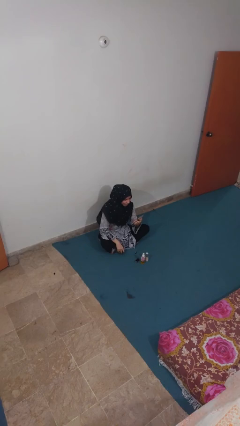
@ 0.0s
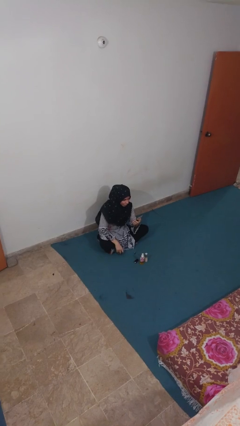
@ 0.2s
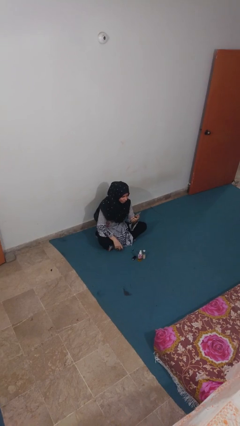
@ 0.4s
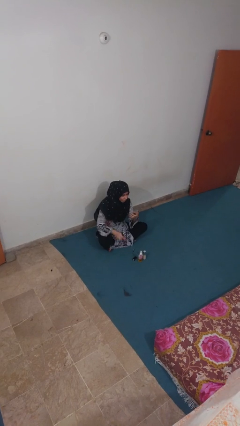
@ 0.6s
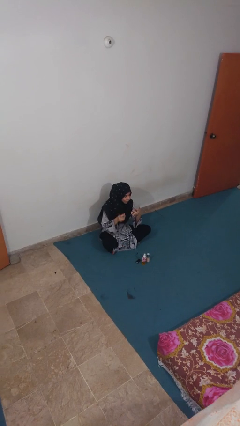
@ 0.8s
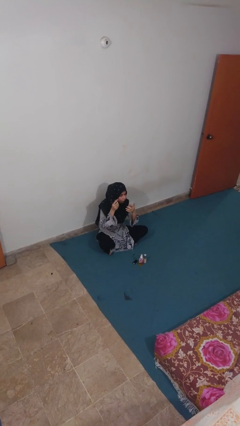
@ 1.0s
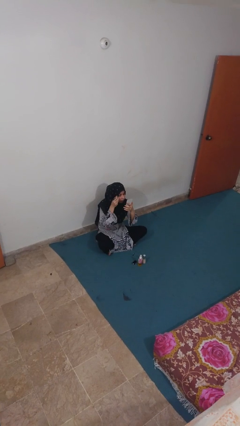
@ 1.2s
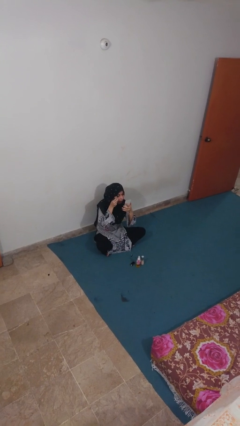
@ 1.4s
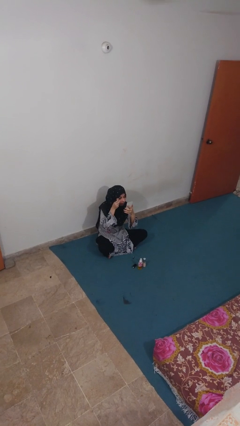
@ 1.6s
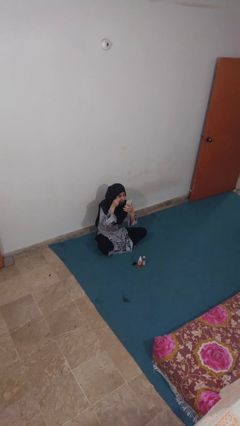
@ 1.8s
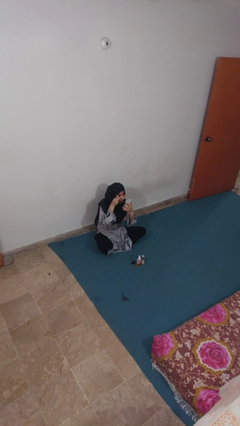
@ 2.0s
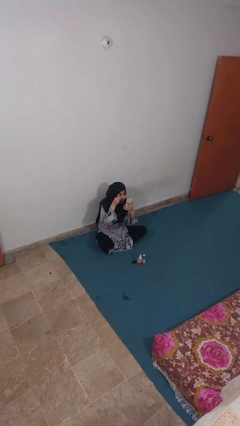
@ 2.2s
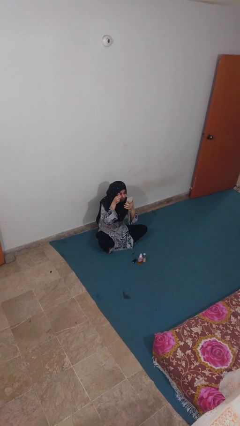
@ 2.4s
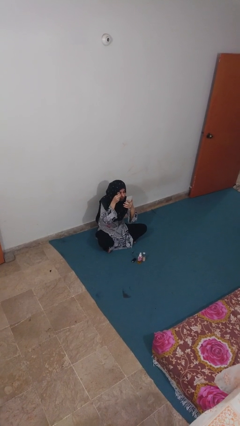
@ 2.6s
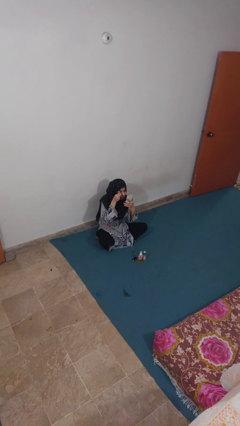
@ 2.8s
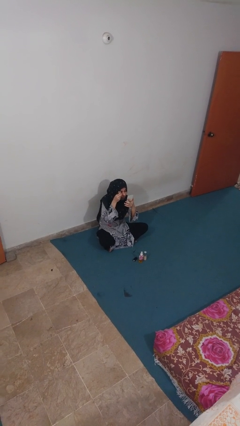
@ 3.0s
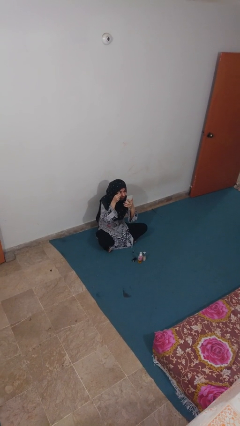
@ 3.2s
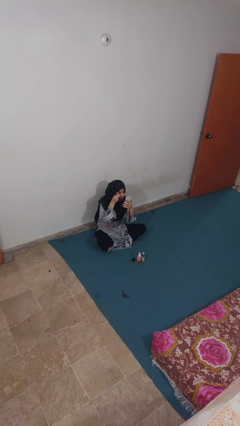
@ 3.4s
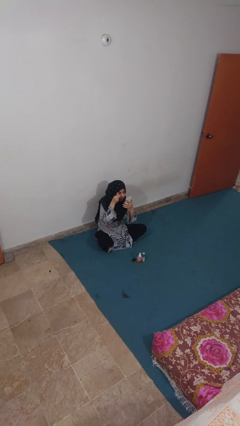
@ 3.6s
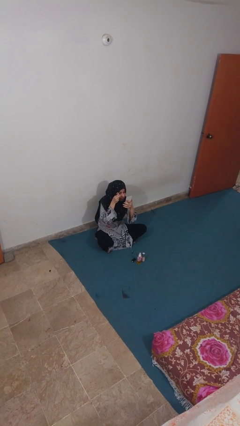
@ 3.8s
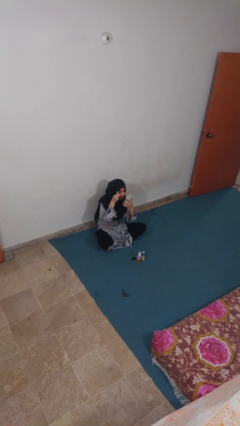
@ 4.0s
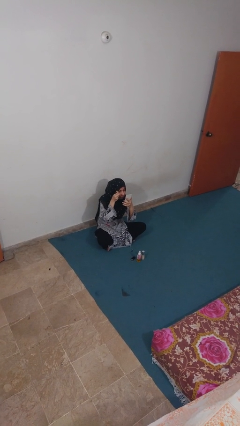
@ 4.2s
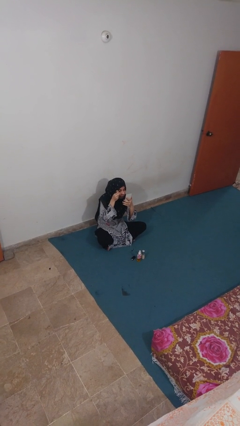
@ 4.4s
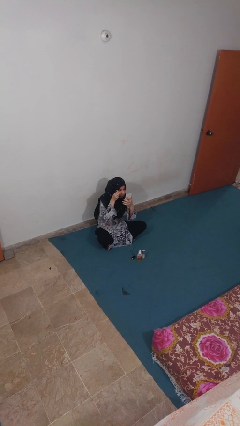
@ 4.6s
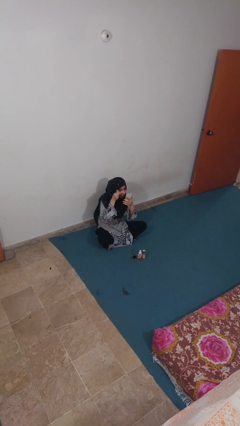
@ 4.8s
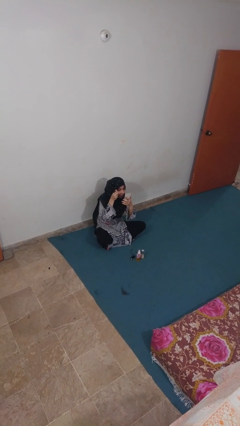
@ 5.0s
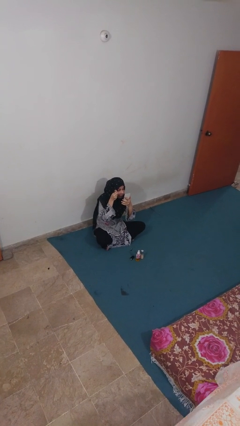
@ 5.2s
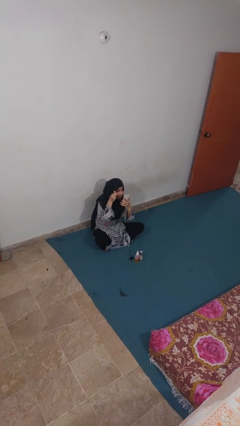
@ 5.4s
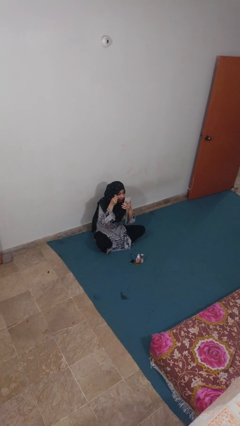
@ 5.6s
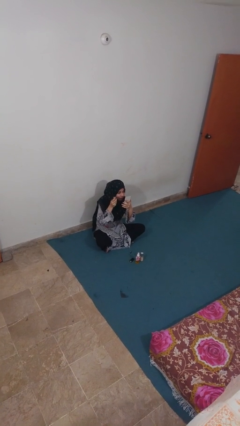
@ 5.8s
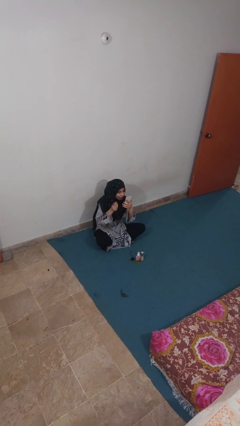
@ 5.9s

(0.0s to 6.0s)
person applies eye makeup

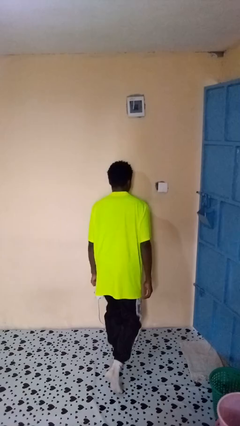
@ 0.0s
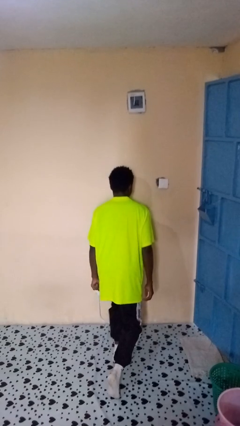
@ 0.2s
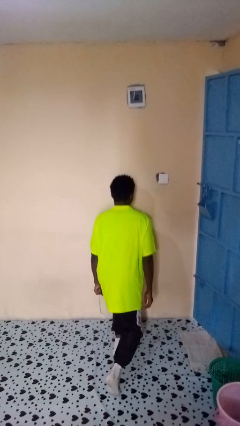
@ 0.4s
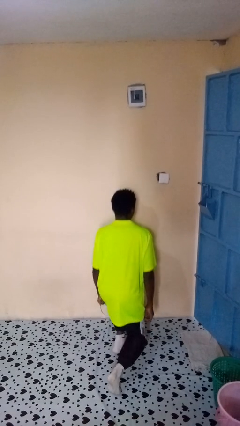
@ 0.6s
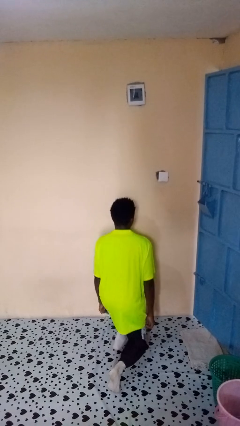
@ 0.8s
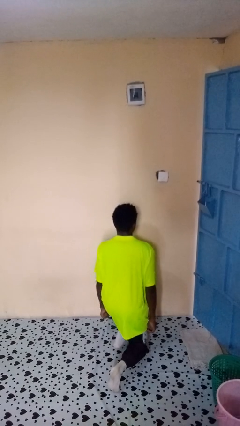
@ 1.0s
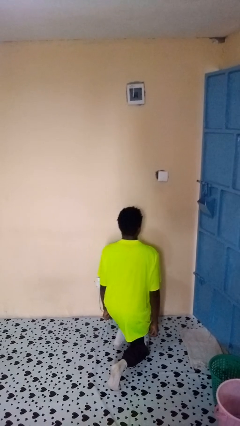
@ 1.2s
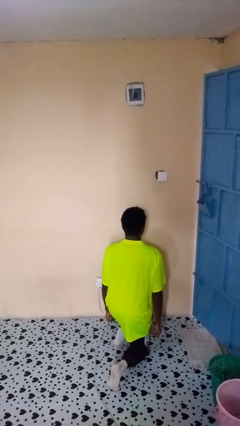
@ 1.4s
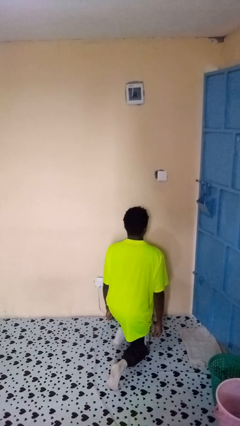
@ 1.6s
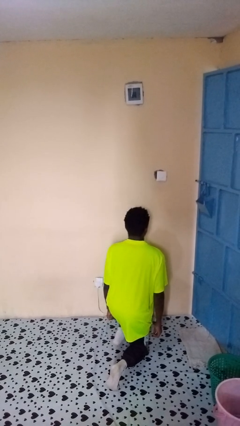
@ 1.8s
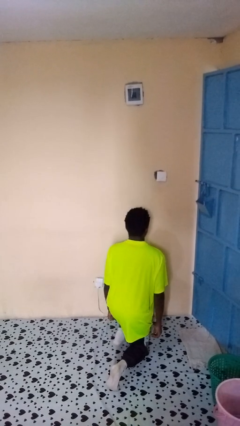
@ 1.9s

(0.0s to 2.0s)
person kneels

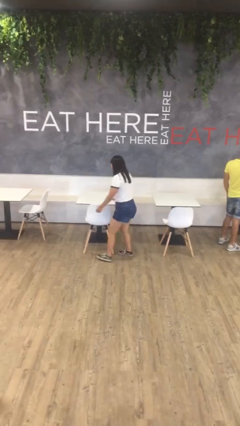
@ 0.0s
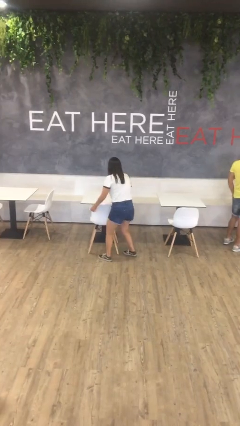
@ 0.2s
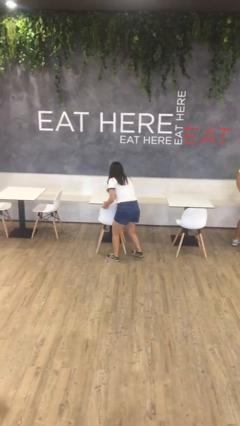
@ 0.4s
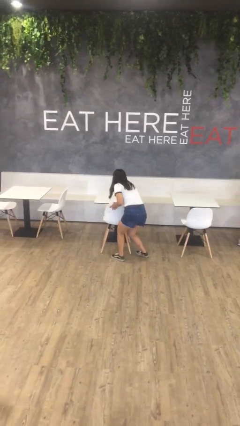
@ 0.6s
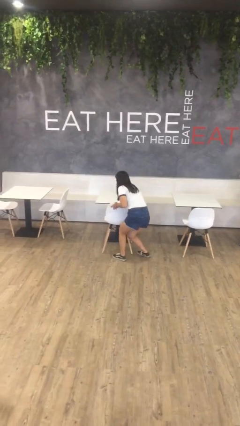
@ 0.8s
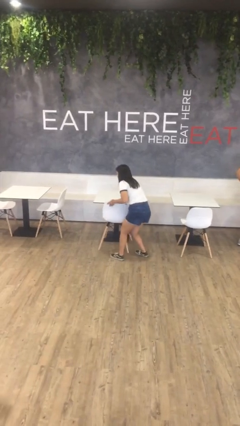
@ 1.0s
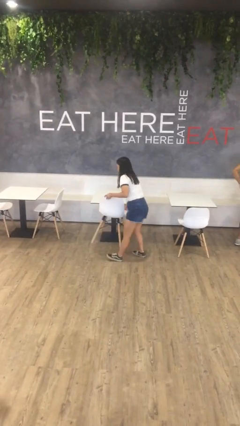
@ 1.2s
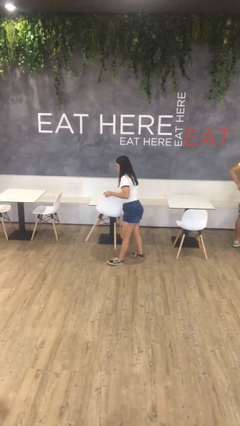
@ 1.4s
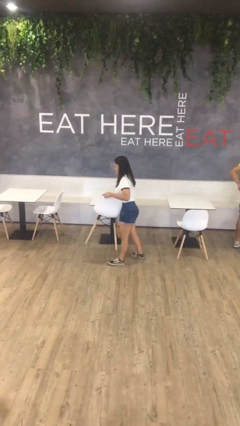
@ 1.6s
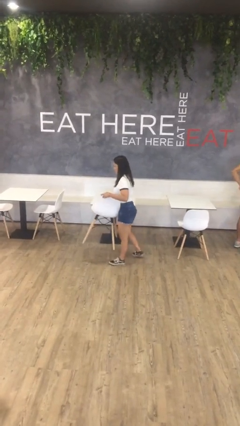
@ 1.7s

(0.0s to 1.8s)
person picks up object from floor

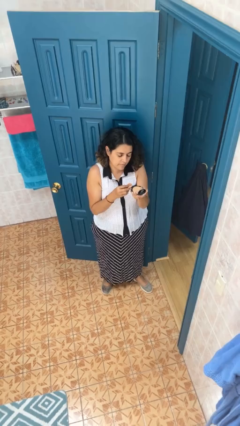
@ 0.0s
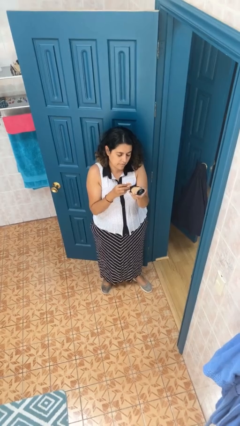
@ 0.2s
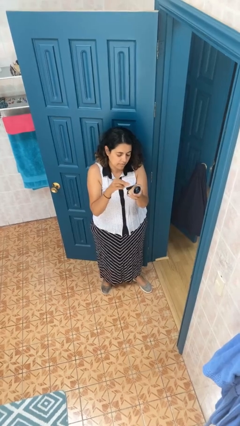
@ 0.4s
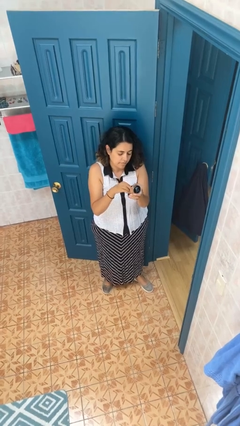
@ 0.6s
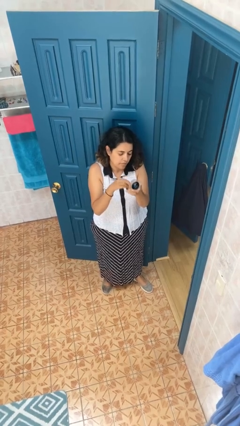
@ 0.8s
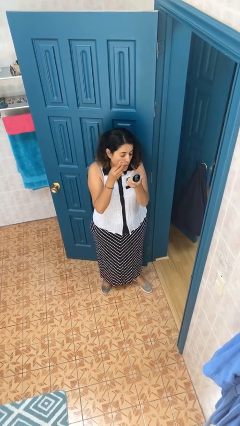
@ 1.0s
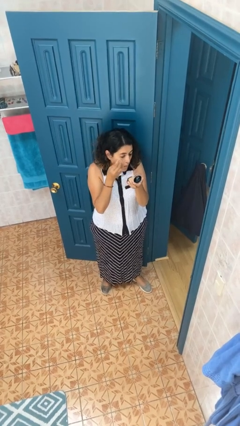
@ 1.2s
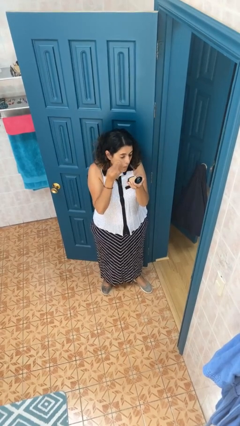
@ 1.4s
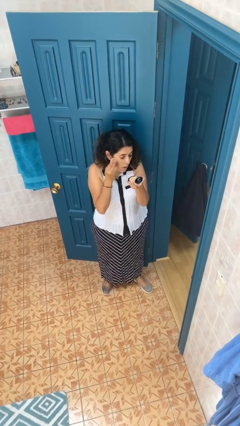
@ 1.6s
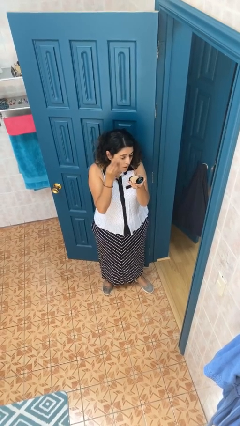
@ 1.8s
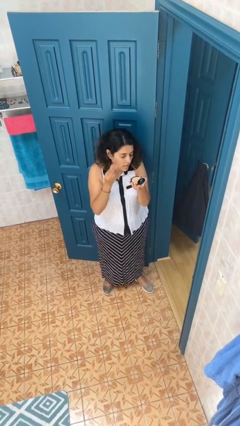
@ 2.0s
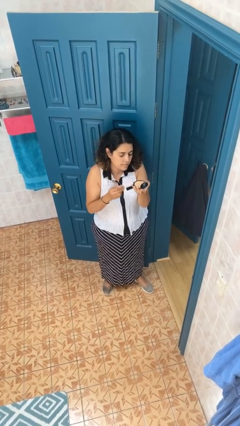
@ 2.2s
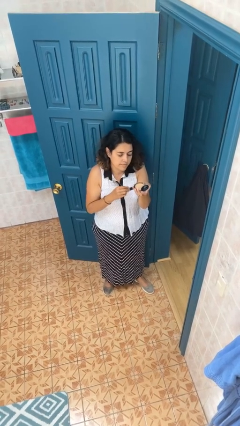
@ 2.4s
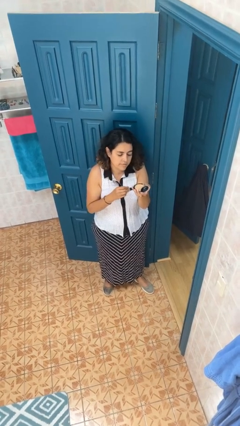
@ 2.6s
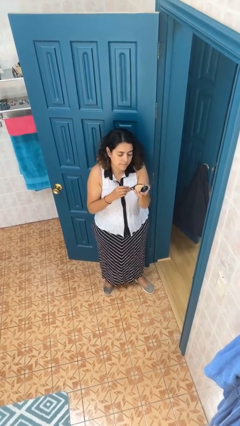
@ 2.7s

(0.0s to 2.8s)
person applies foundation makeup

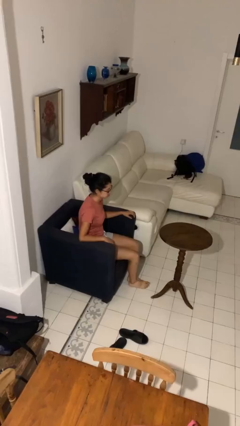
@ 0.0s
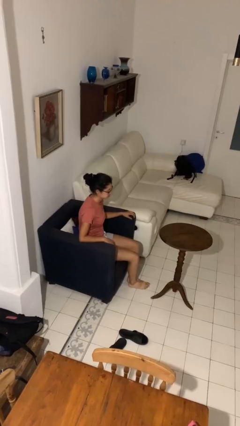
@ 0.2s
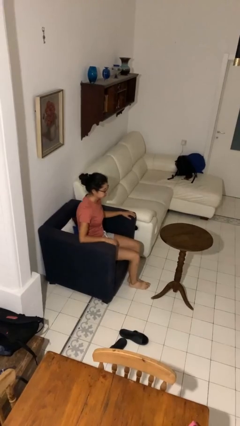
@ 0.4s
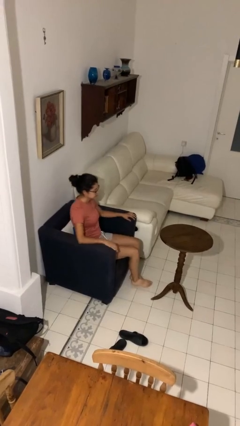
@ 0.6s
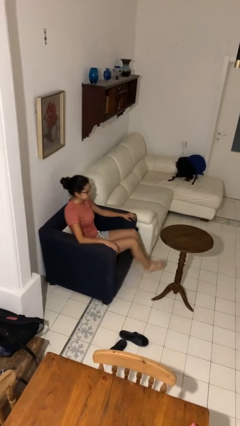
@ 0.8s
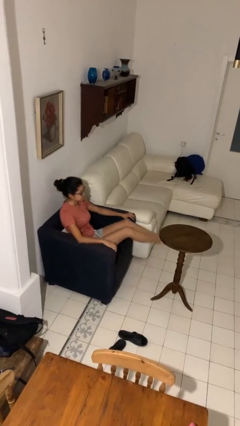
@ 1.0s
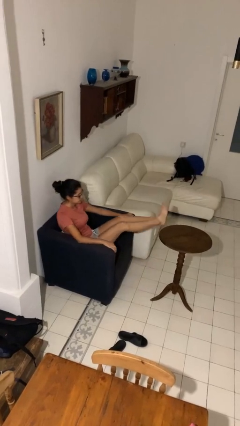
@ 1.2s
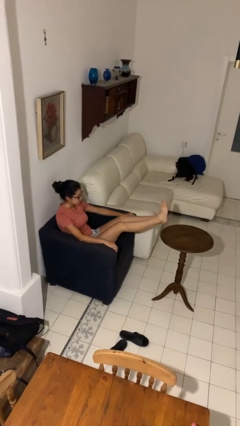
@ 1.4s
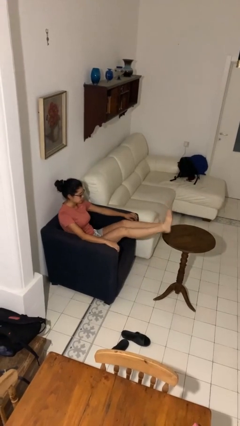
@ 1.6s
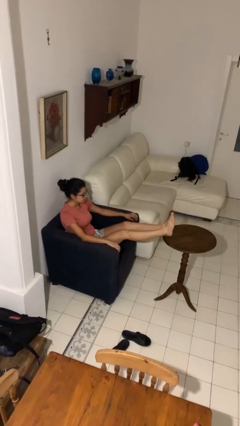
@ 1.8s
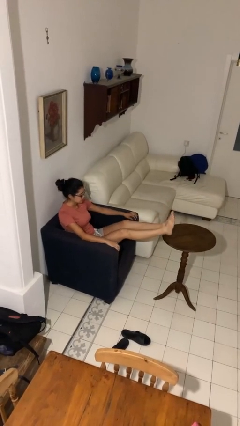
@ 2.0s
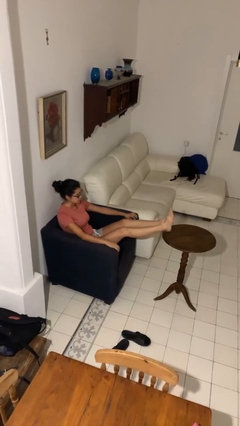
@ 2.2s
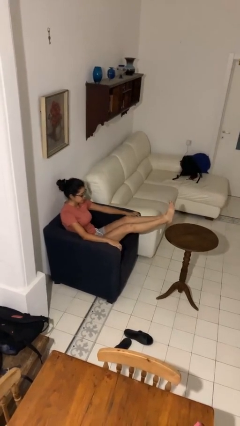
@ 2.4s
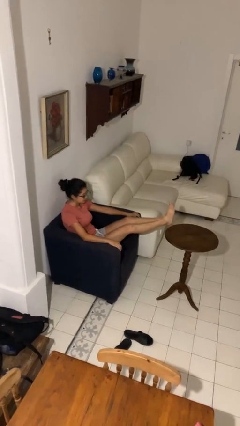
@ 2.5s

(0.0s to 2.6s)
person puts feet up

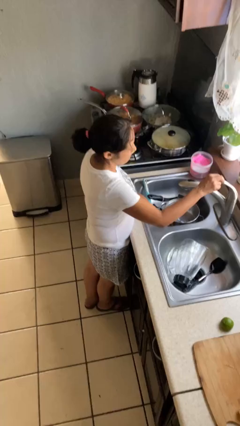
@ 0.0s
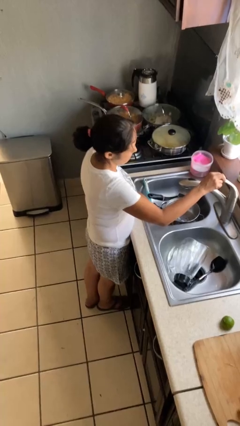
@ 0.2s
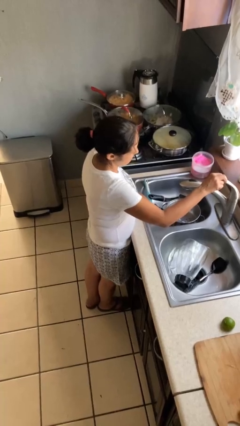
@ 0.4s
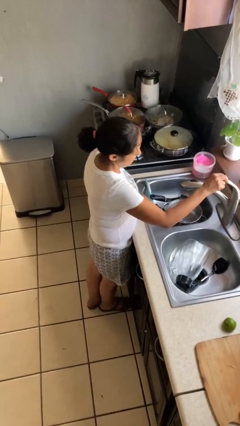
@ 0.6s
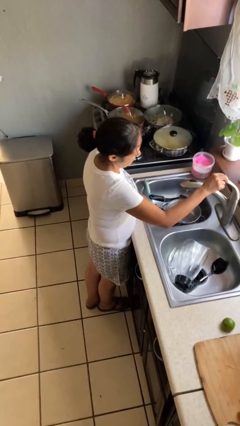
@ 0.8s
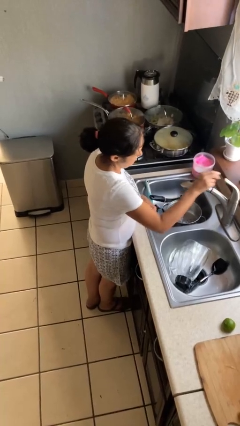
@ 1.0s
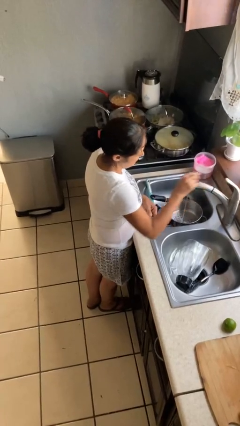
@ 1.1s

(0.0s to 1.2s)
person turns on faucet

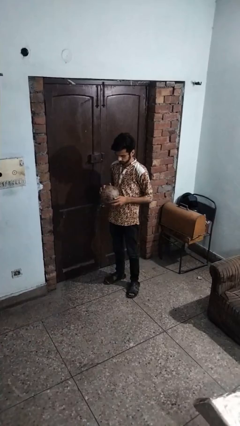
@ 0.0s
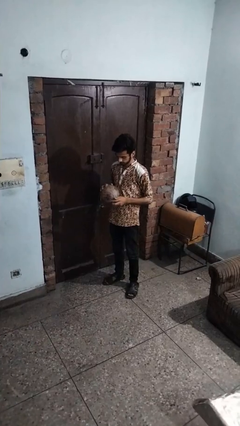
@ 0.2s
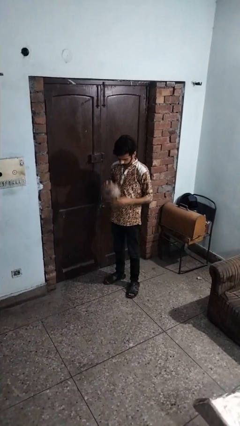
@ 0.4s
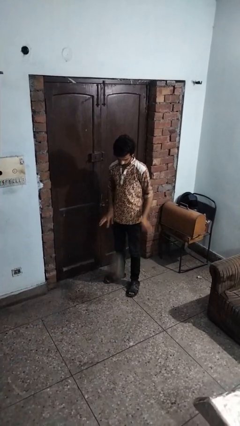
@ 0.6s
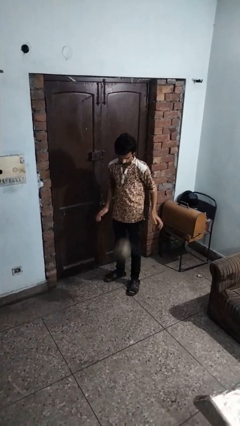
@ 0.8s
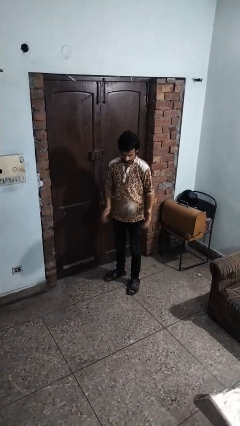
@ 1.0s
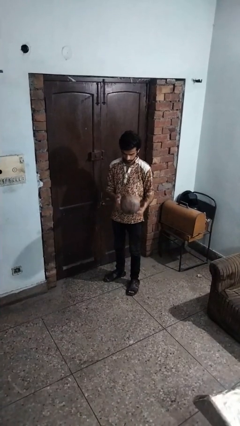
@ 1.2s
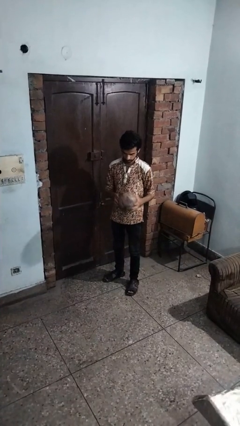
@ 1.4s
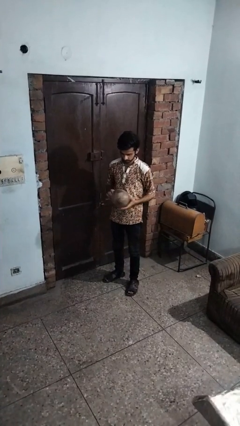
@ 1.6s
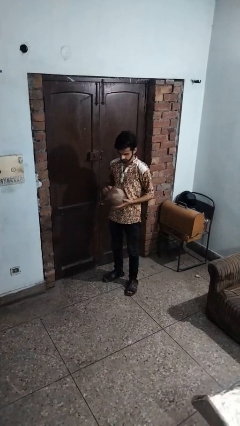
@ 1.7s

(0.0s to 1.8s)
person bounces ball on floor
